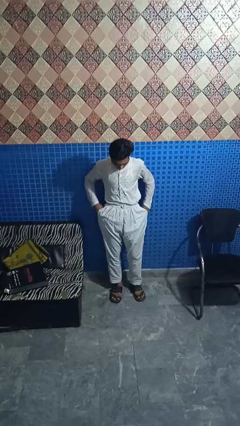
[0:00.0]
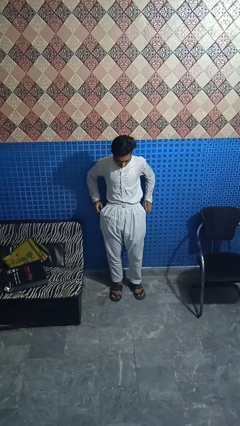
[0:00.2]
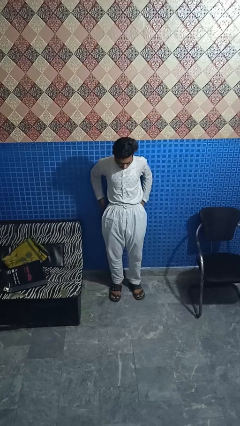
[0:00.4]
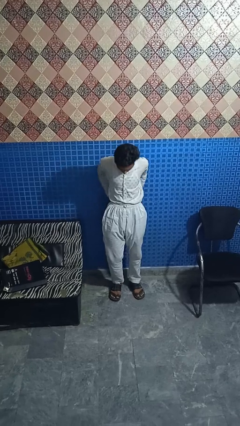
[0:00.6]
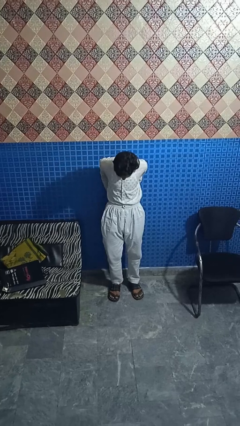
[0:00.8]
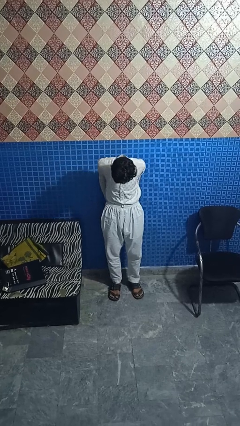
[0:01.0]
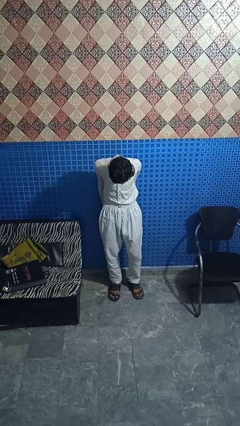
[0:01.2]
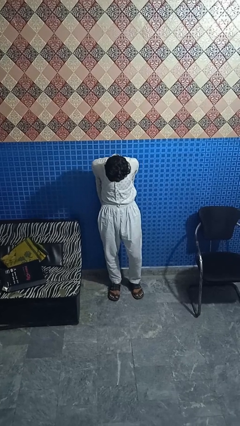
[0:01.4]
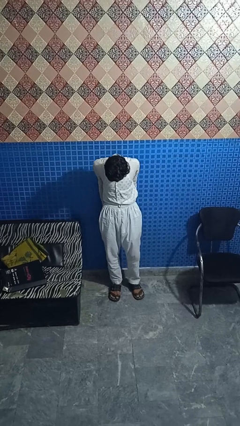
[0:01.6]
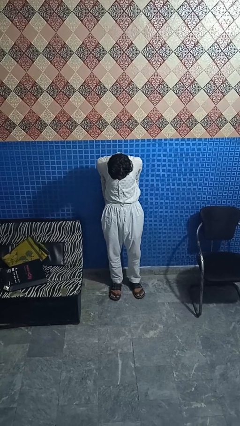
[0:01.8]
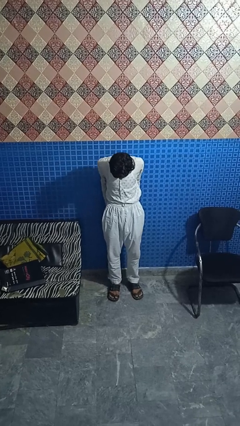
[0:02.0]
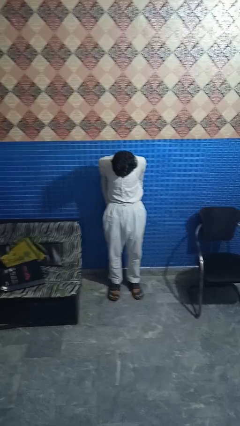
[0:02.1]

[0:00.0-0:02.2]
person puts hands in back pockets

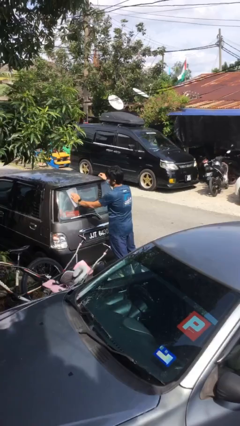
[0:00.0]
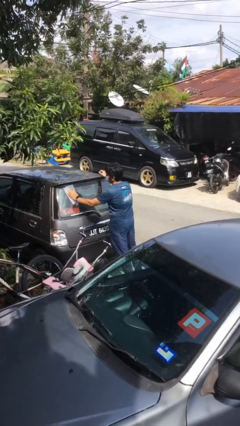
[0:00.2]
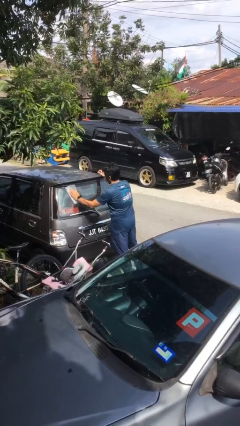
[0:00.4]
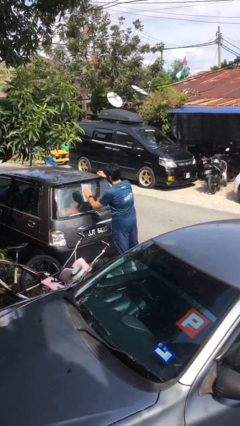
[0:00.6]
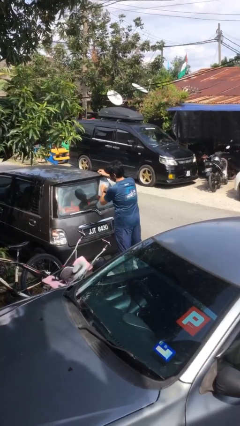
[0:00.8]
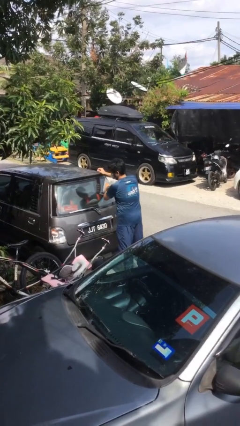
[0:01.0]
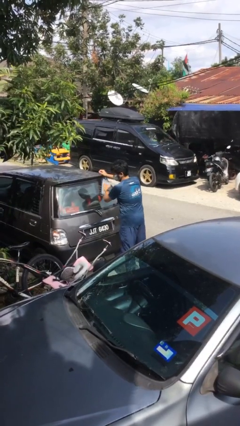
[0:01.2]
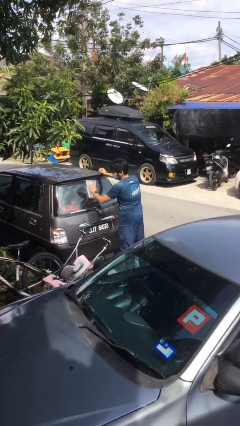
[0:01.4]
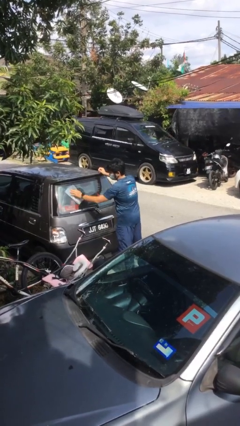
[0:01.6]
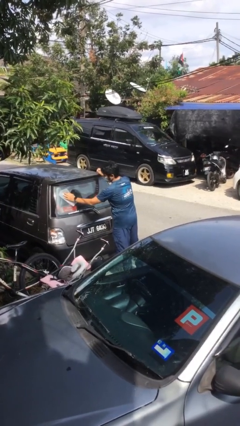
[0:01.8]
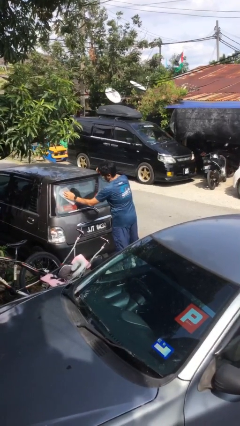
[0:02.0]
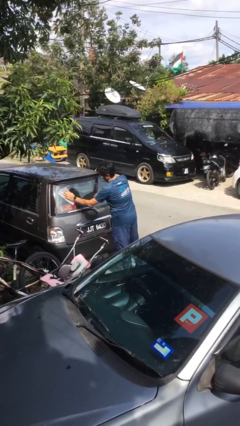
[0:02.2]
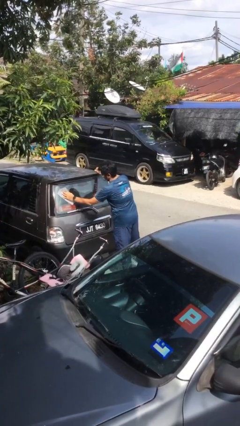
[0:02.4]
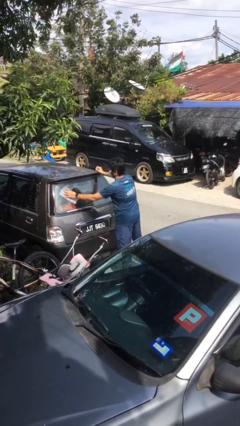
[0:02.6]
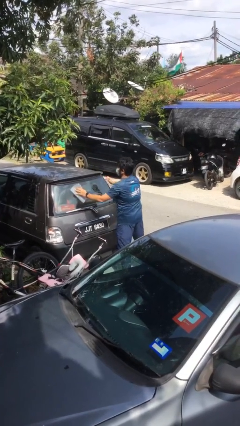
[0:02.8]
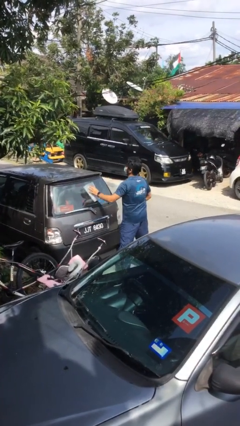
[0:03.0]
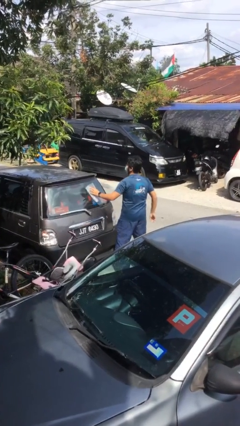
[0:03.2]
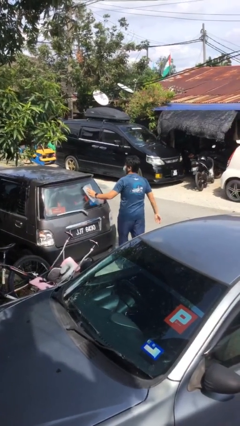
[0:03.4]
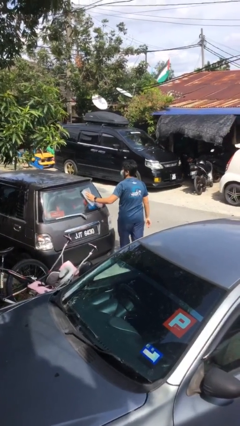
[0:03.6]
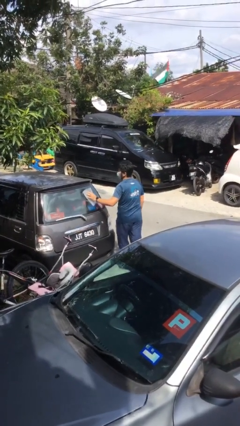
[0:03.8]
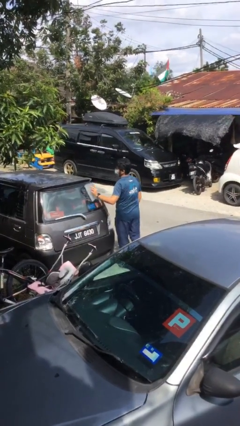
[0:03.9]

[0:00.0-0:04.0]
person polishes car with rag

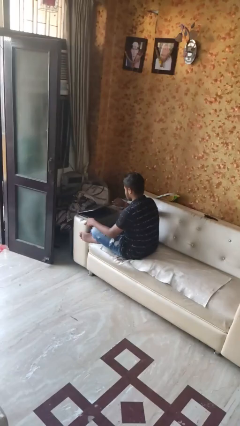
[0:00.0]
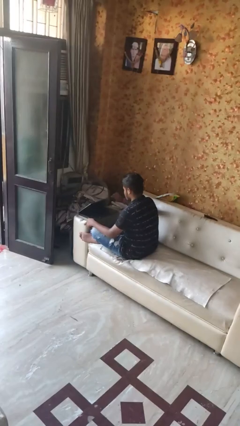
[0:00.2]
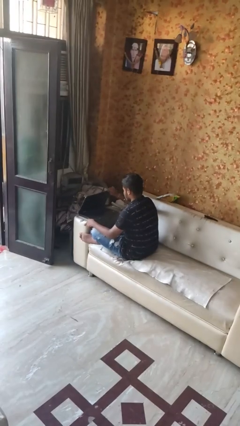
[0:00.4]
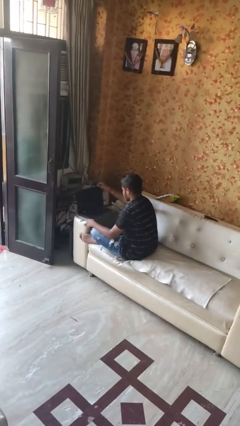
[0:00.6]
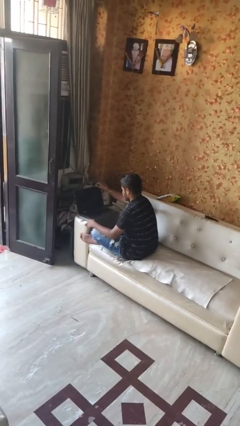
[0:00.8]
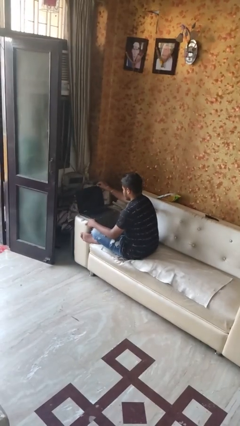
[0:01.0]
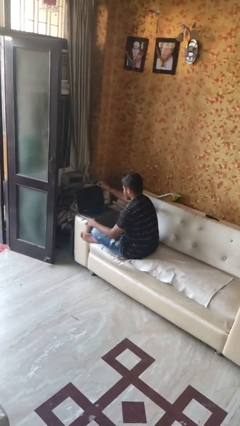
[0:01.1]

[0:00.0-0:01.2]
person opens laptop

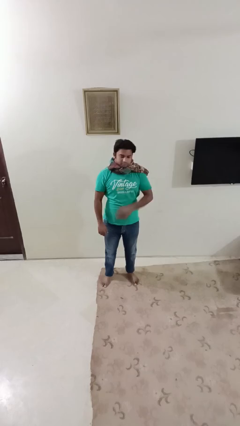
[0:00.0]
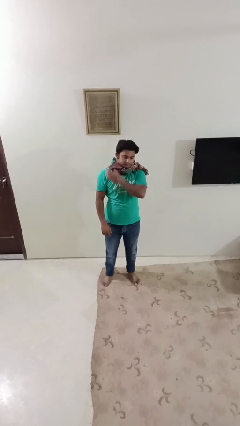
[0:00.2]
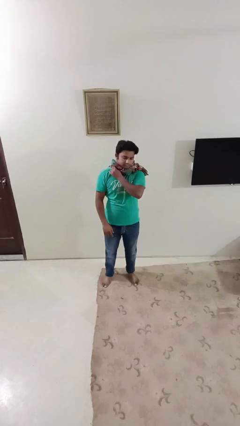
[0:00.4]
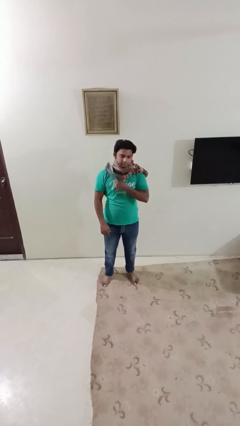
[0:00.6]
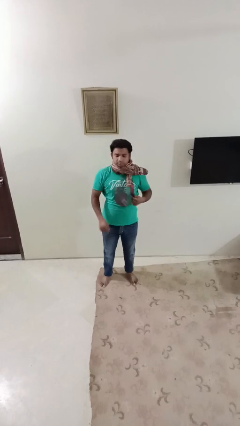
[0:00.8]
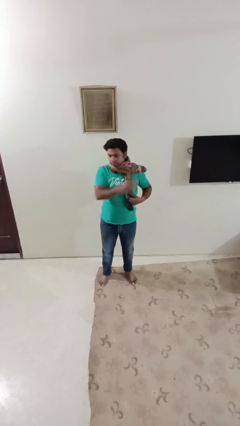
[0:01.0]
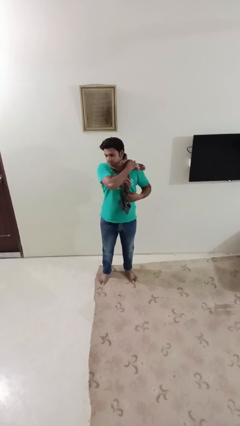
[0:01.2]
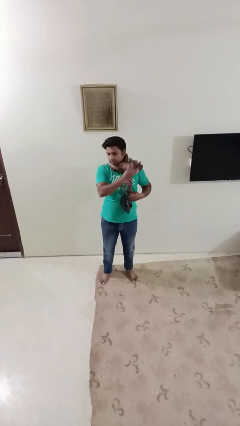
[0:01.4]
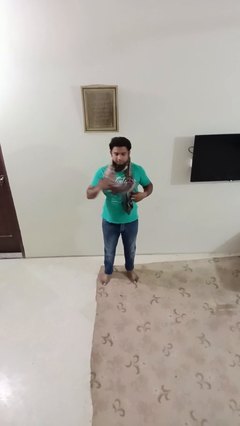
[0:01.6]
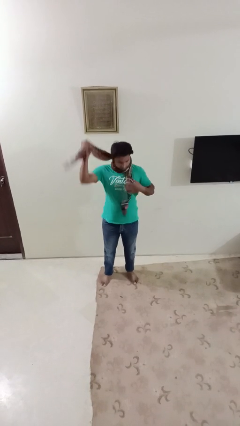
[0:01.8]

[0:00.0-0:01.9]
person takes off scarf

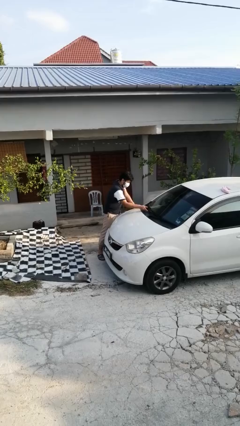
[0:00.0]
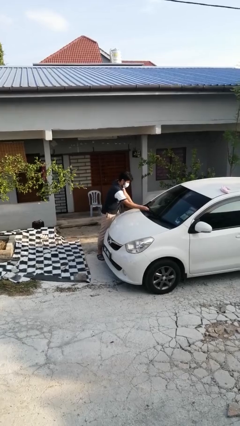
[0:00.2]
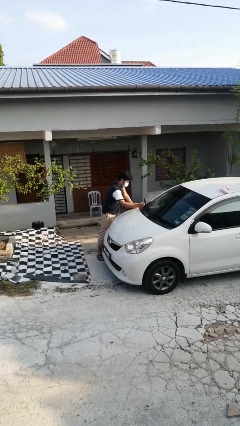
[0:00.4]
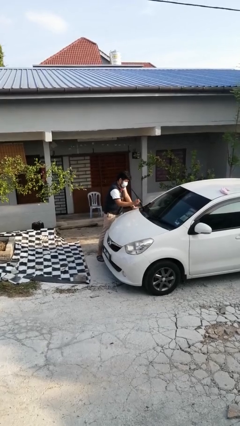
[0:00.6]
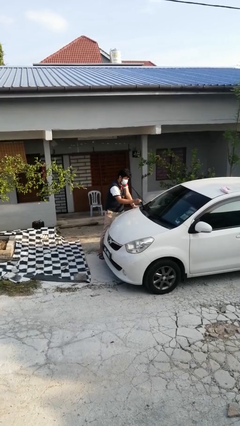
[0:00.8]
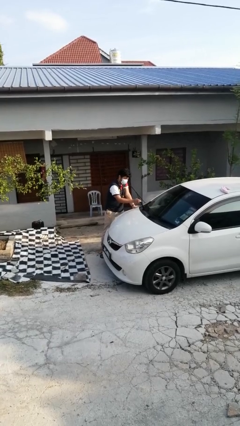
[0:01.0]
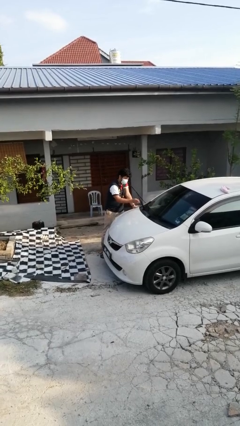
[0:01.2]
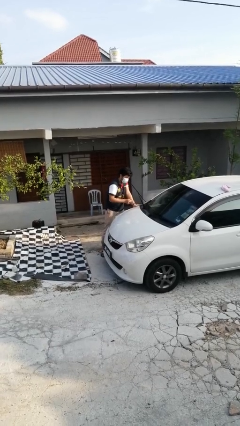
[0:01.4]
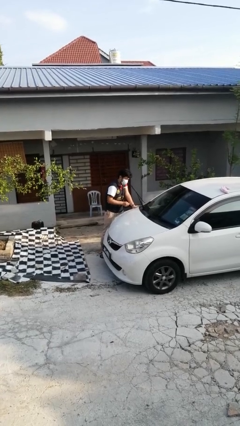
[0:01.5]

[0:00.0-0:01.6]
person flips up car wipers

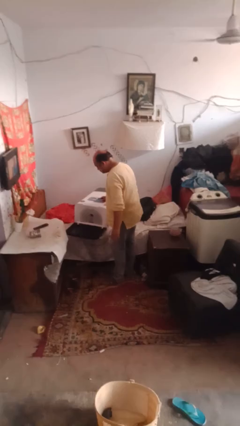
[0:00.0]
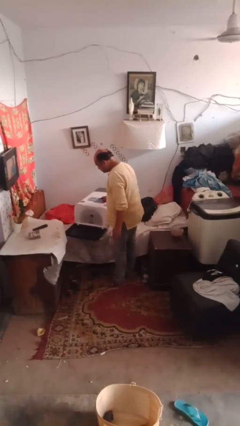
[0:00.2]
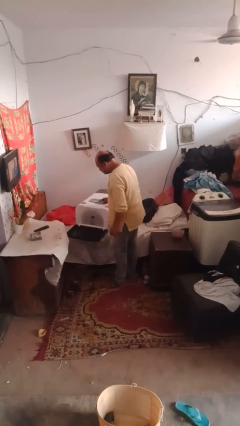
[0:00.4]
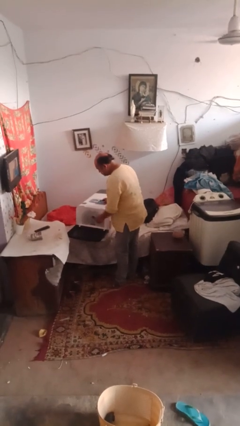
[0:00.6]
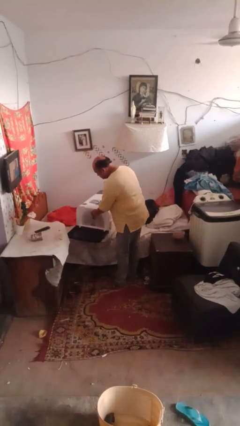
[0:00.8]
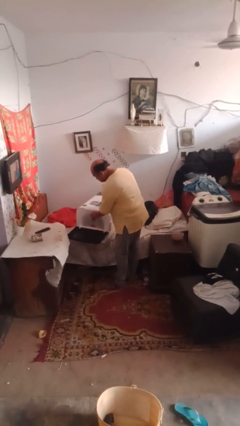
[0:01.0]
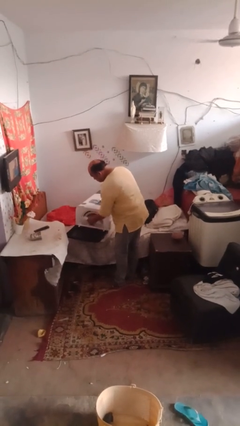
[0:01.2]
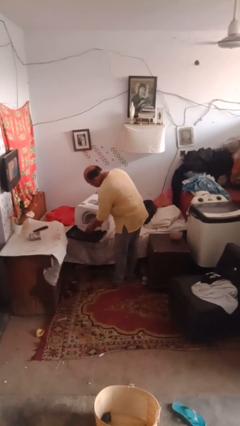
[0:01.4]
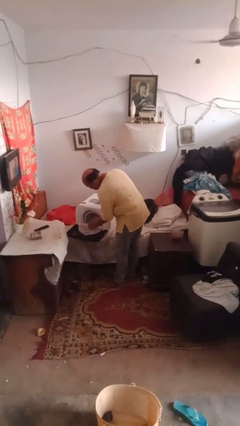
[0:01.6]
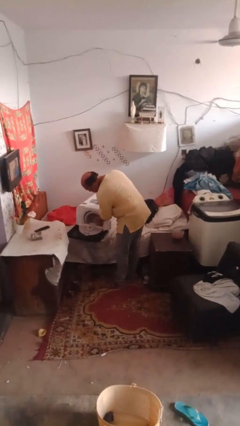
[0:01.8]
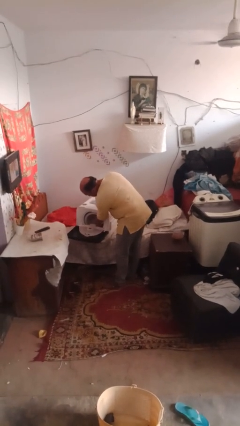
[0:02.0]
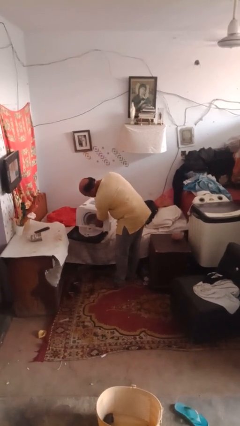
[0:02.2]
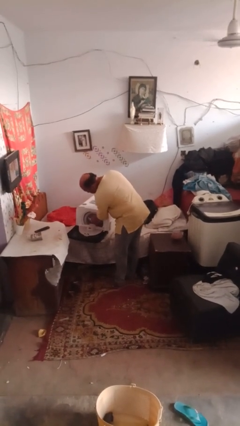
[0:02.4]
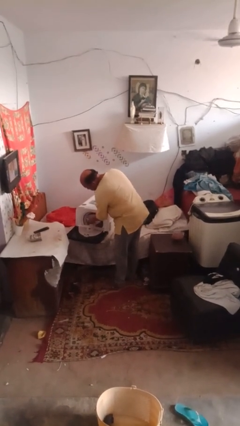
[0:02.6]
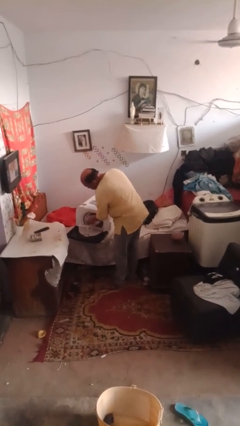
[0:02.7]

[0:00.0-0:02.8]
person unloads dishwasher

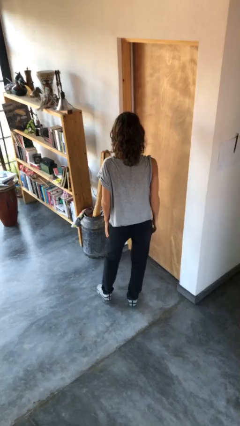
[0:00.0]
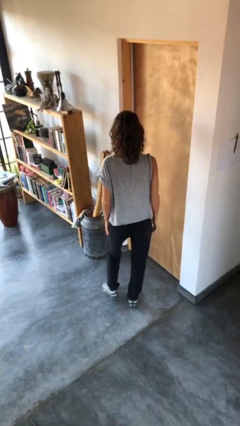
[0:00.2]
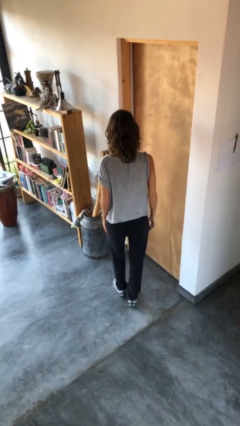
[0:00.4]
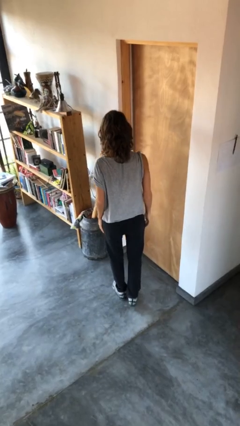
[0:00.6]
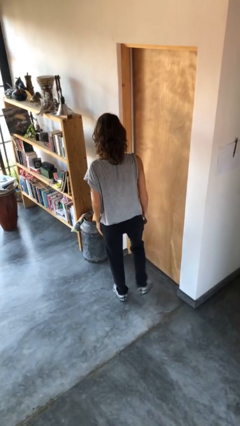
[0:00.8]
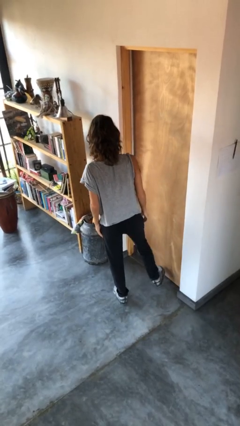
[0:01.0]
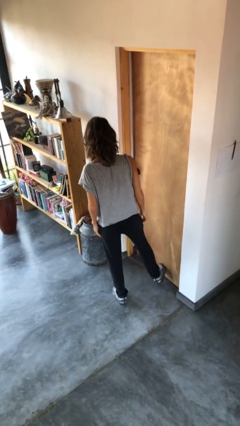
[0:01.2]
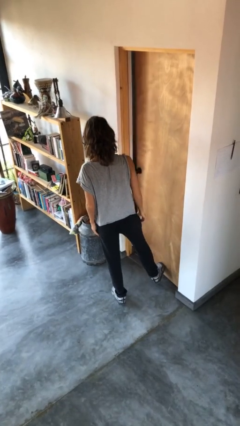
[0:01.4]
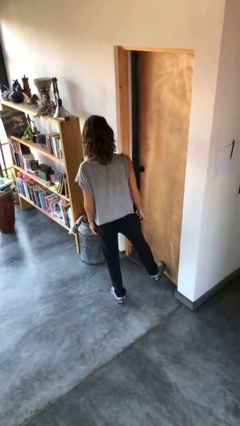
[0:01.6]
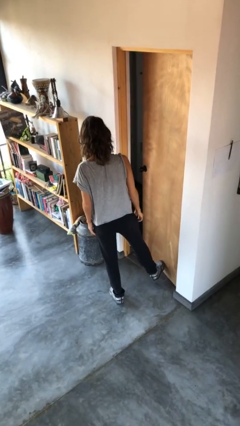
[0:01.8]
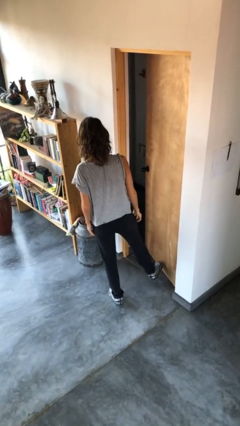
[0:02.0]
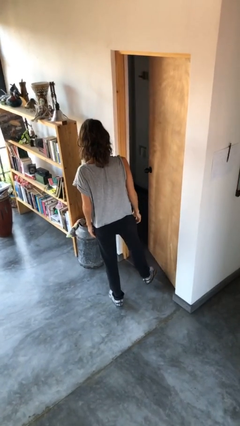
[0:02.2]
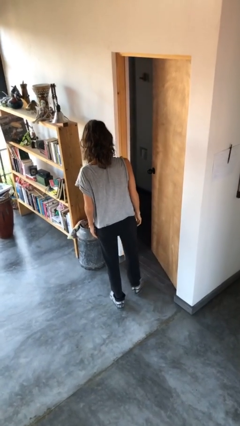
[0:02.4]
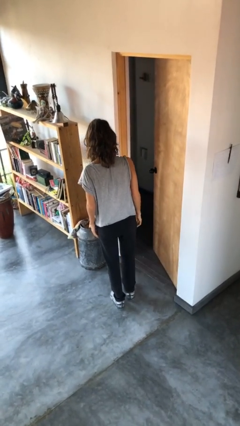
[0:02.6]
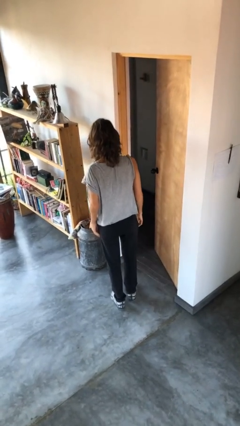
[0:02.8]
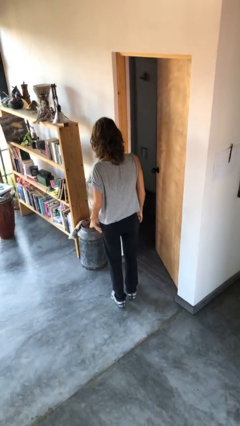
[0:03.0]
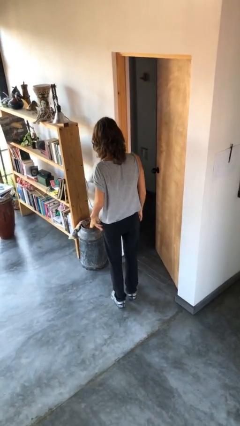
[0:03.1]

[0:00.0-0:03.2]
person opens facility door
